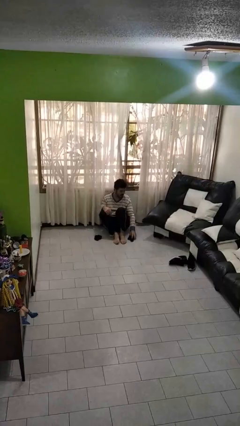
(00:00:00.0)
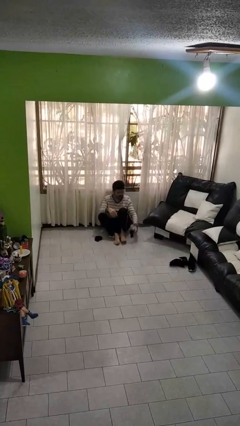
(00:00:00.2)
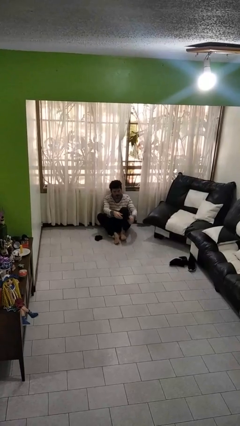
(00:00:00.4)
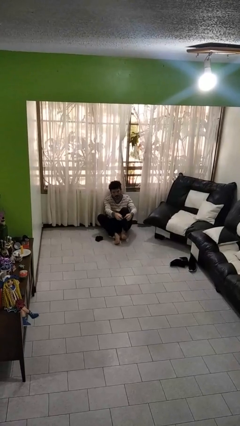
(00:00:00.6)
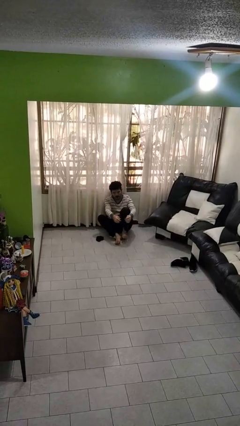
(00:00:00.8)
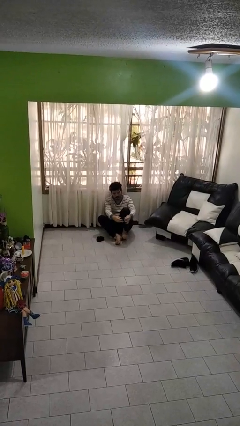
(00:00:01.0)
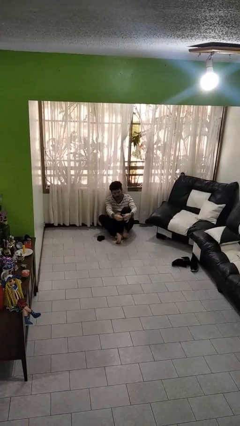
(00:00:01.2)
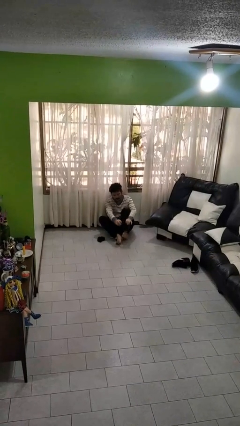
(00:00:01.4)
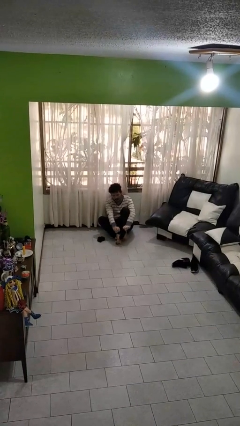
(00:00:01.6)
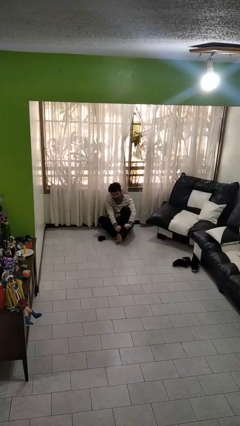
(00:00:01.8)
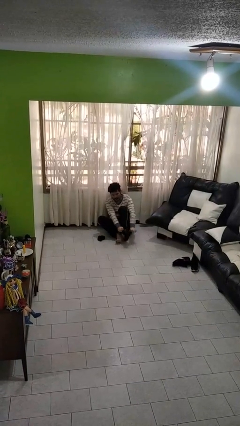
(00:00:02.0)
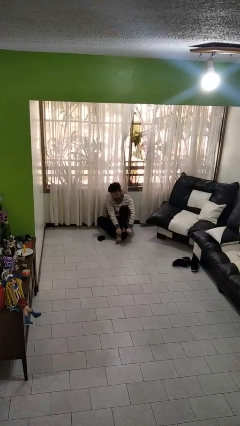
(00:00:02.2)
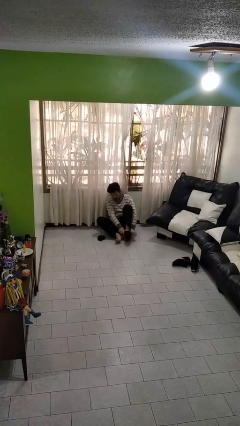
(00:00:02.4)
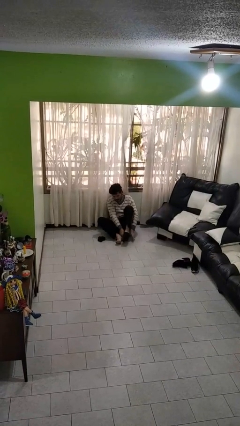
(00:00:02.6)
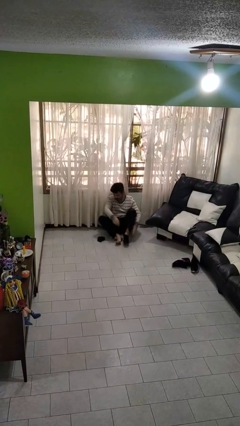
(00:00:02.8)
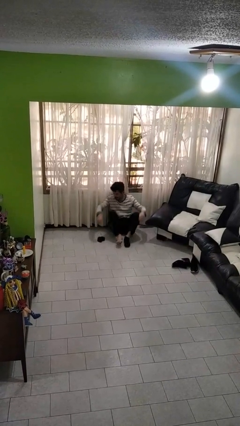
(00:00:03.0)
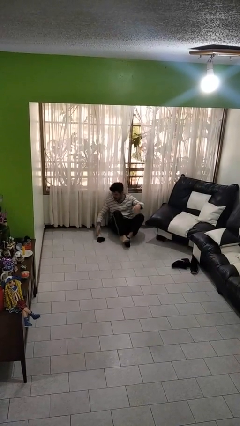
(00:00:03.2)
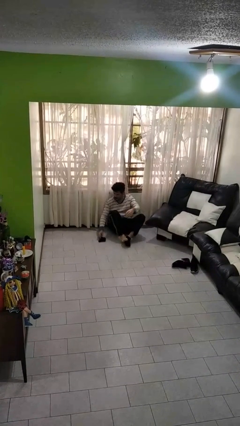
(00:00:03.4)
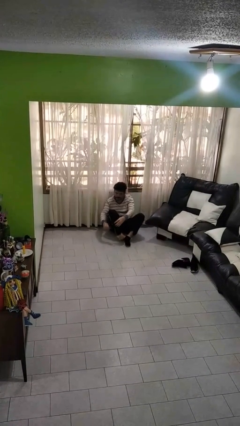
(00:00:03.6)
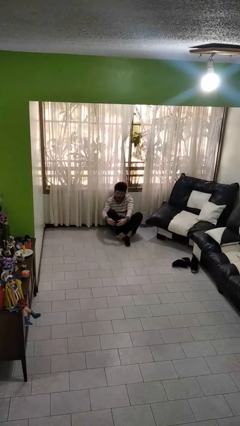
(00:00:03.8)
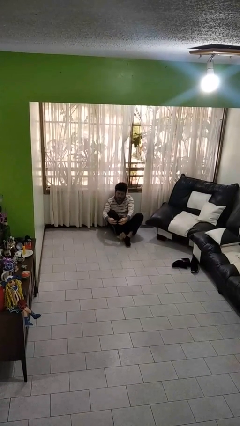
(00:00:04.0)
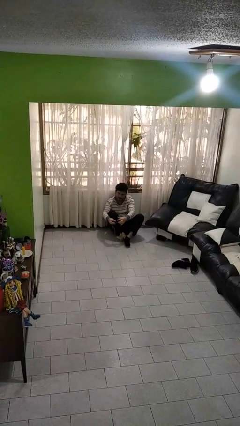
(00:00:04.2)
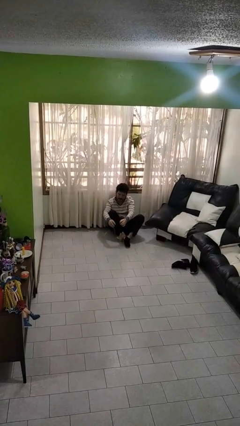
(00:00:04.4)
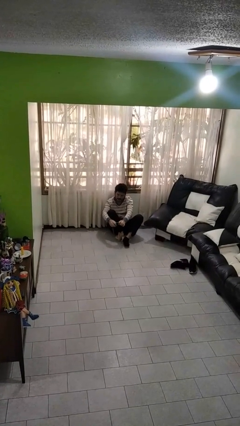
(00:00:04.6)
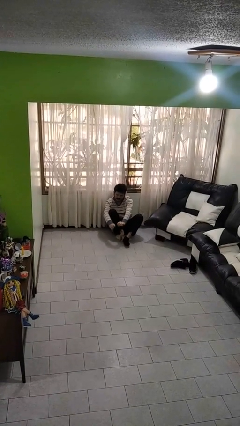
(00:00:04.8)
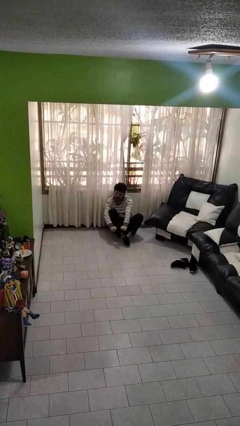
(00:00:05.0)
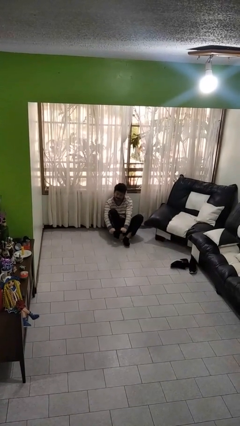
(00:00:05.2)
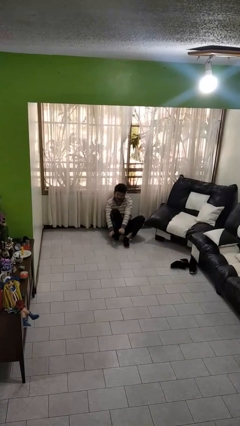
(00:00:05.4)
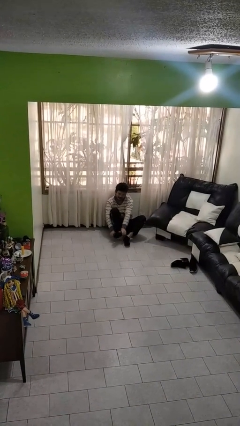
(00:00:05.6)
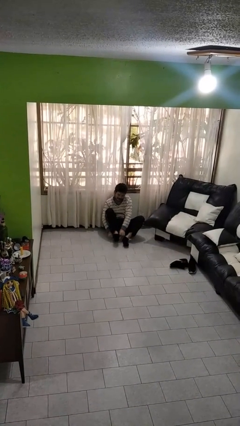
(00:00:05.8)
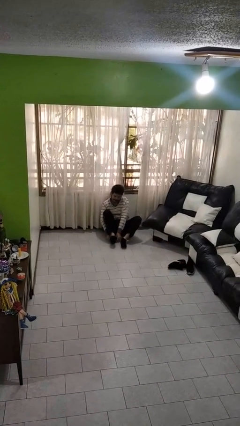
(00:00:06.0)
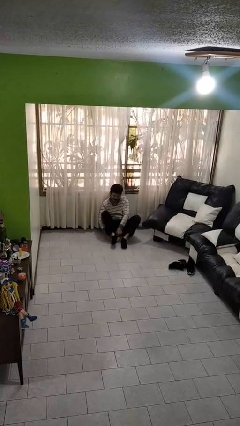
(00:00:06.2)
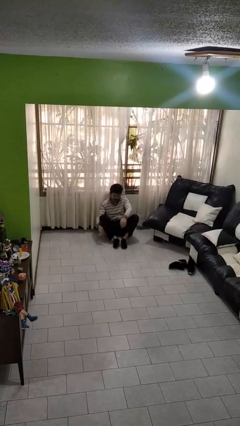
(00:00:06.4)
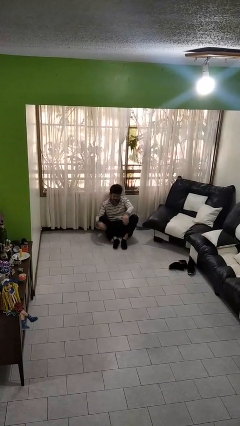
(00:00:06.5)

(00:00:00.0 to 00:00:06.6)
person puts on socks

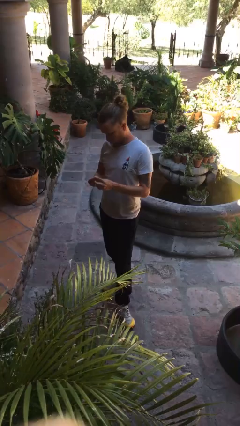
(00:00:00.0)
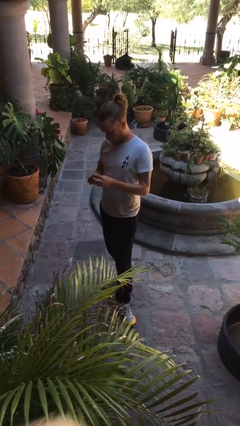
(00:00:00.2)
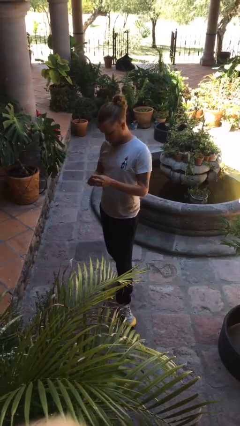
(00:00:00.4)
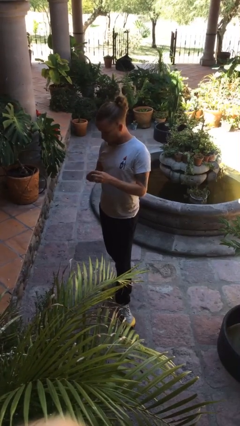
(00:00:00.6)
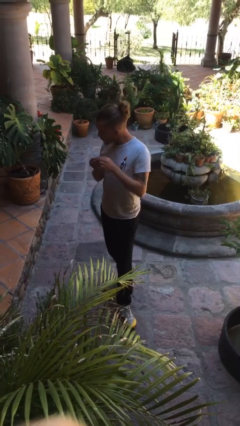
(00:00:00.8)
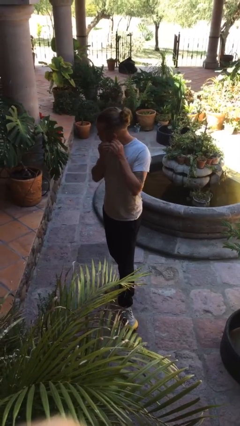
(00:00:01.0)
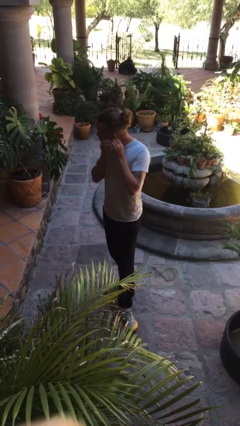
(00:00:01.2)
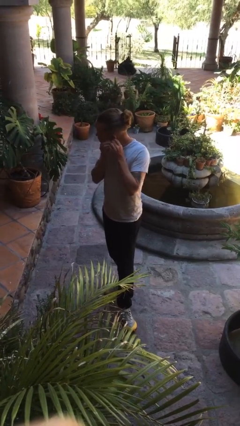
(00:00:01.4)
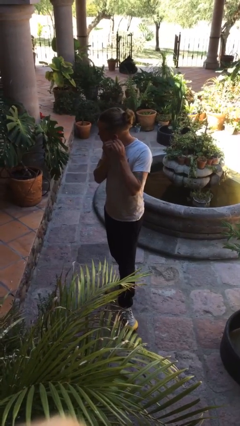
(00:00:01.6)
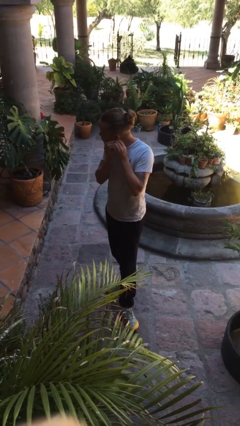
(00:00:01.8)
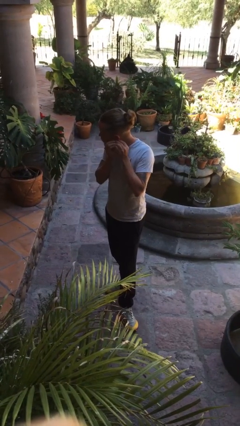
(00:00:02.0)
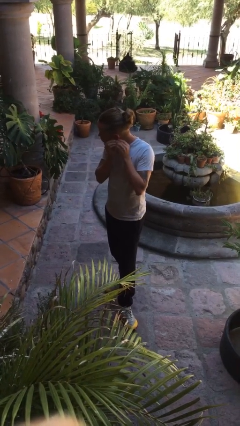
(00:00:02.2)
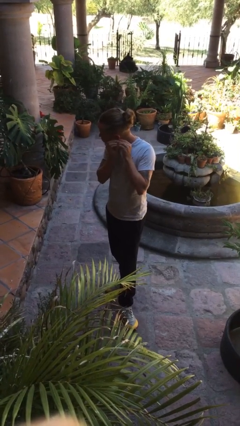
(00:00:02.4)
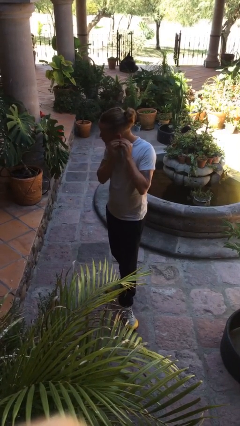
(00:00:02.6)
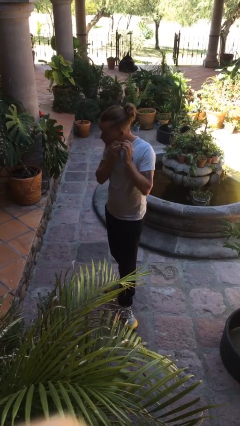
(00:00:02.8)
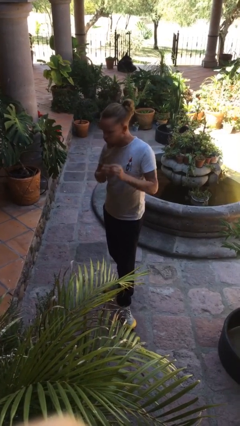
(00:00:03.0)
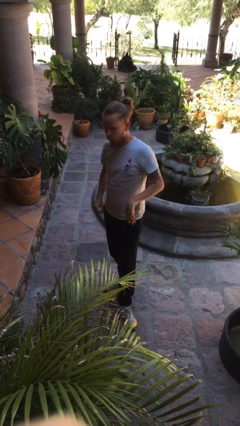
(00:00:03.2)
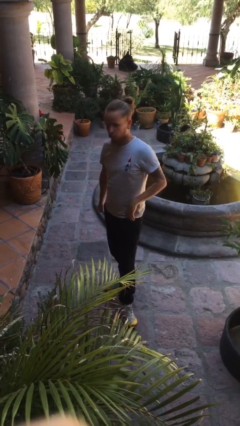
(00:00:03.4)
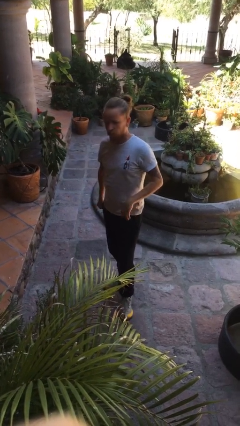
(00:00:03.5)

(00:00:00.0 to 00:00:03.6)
person puts on earrings

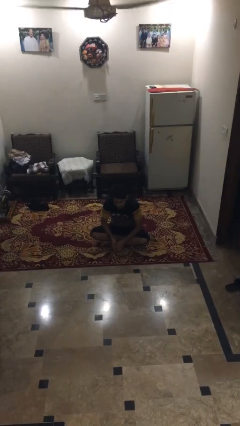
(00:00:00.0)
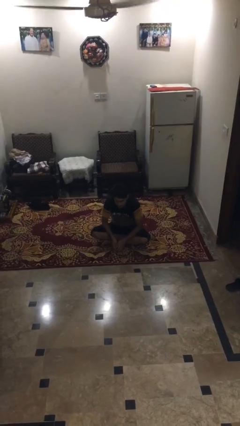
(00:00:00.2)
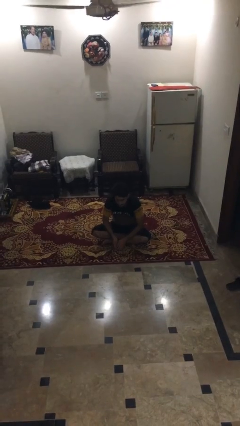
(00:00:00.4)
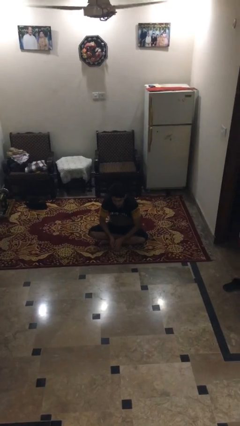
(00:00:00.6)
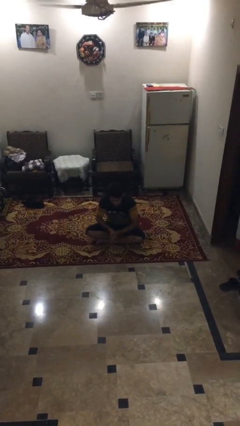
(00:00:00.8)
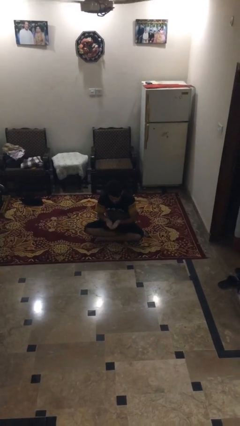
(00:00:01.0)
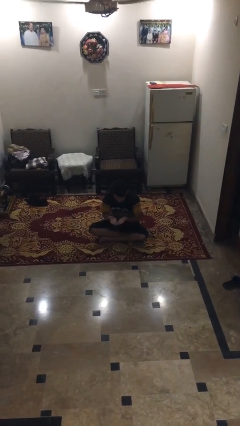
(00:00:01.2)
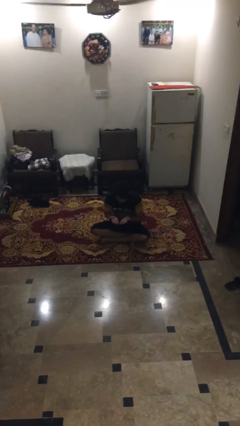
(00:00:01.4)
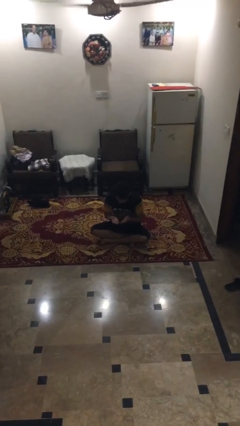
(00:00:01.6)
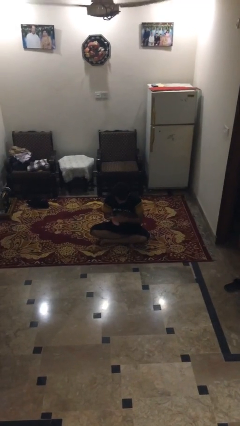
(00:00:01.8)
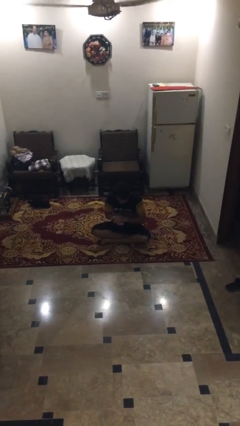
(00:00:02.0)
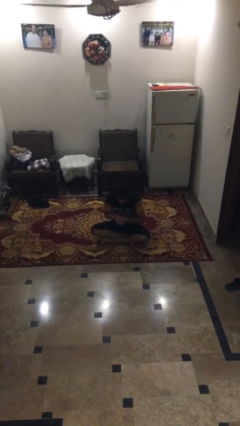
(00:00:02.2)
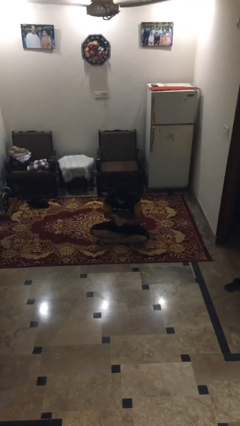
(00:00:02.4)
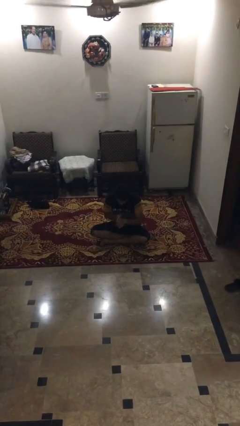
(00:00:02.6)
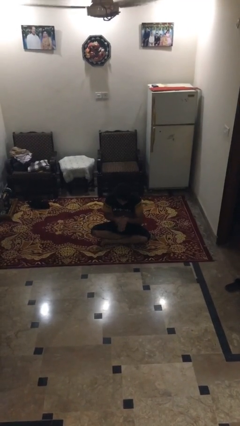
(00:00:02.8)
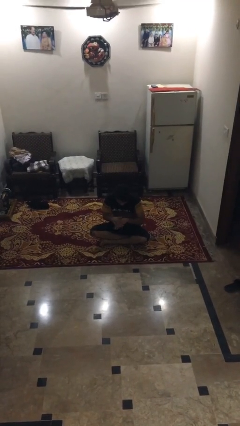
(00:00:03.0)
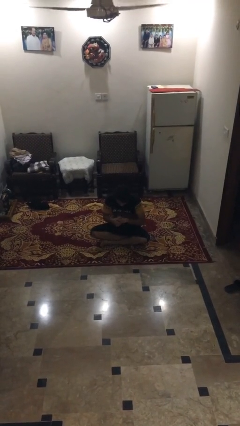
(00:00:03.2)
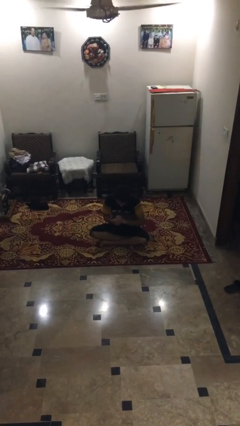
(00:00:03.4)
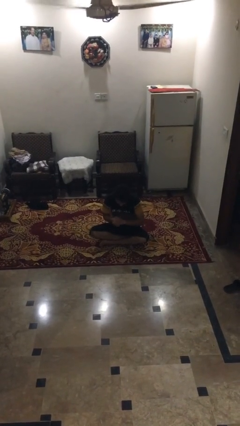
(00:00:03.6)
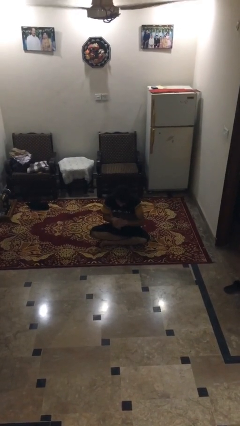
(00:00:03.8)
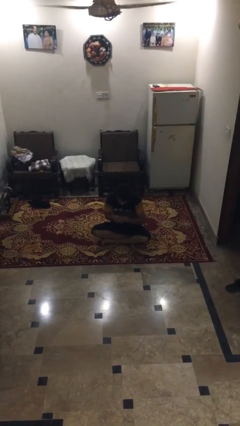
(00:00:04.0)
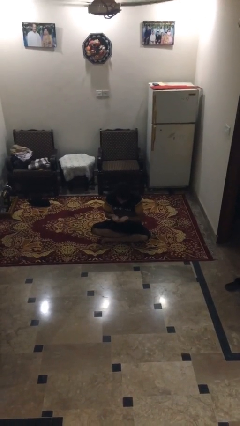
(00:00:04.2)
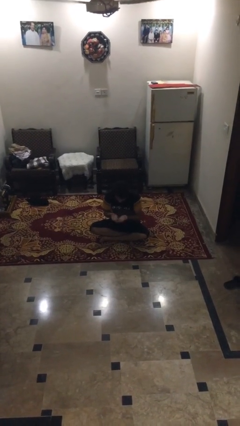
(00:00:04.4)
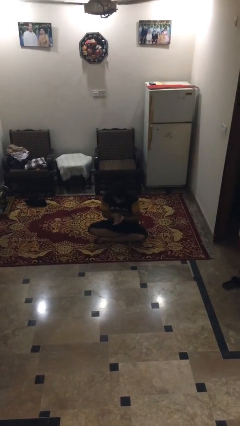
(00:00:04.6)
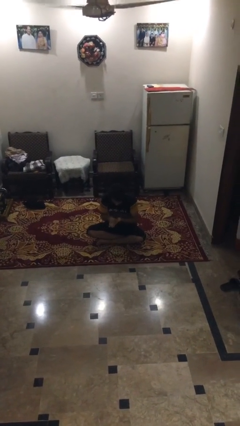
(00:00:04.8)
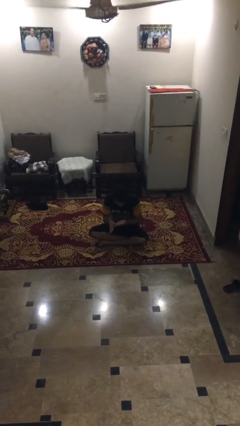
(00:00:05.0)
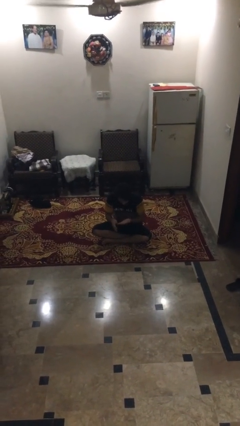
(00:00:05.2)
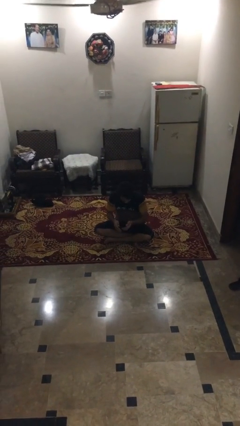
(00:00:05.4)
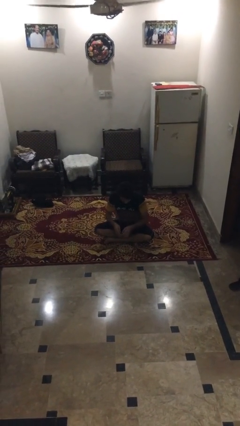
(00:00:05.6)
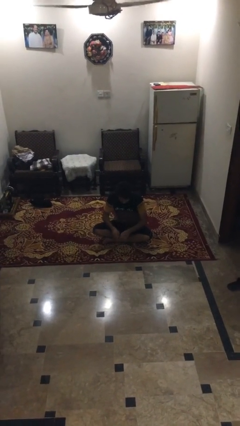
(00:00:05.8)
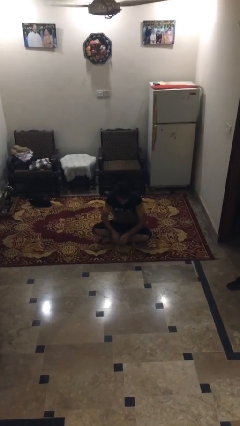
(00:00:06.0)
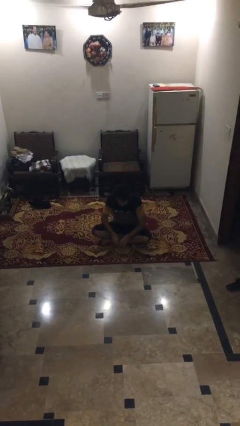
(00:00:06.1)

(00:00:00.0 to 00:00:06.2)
person looks at hands in lap

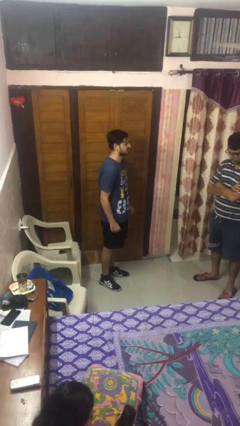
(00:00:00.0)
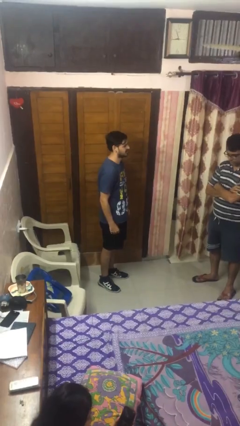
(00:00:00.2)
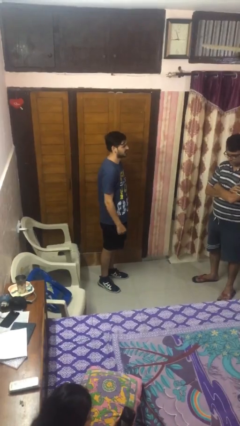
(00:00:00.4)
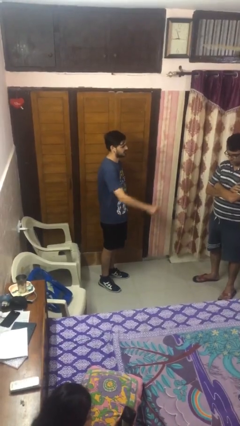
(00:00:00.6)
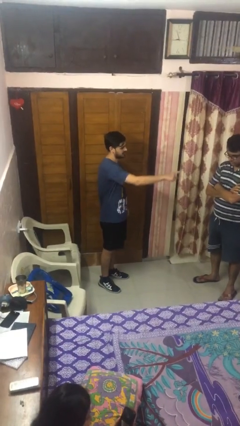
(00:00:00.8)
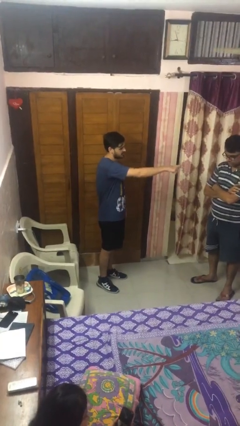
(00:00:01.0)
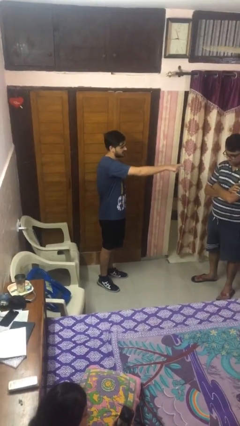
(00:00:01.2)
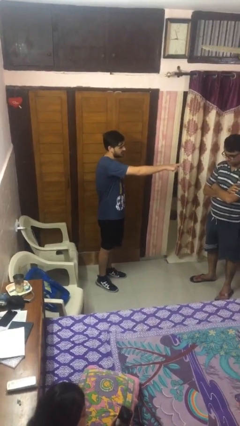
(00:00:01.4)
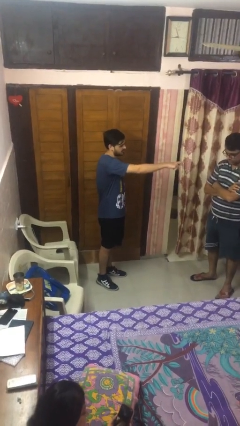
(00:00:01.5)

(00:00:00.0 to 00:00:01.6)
person points at person
